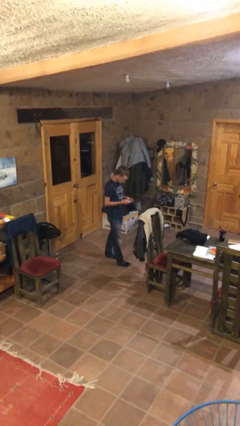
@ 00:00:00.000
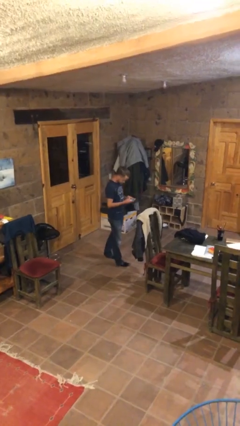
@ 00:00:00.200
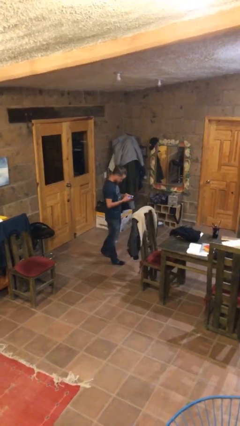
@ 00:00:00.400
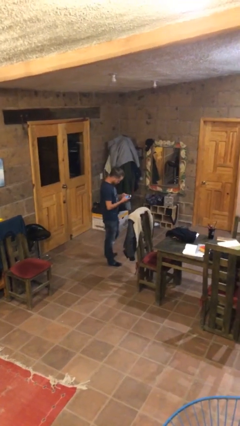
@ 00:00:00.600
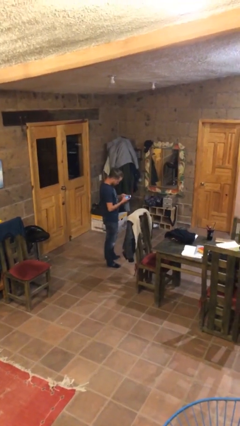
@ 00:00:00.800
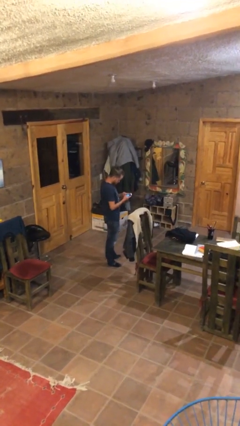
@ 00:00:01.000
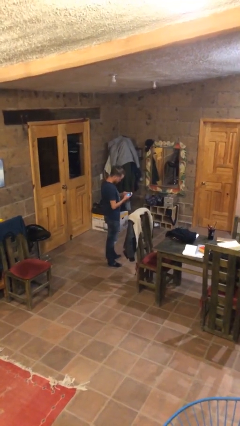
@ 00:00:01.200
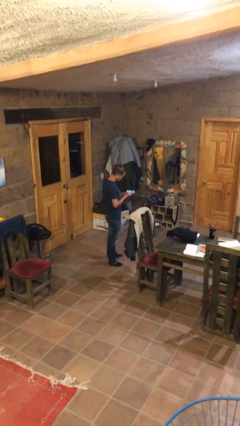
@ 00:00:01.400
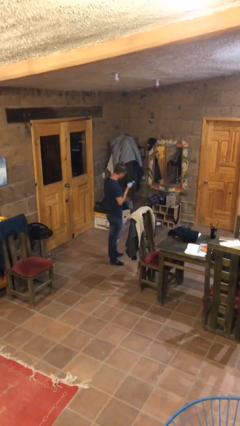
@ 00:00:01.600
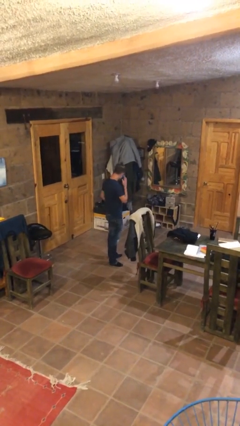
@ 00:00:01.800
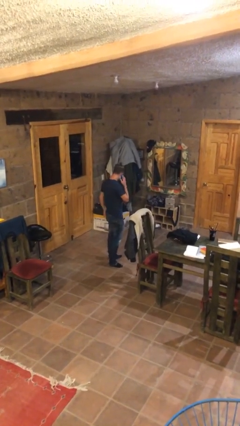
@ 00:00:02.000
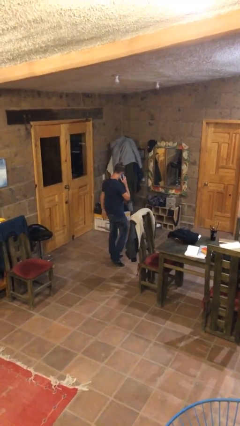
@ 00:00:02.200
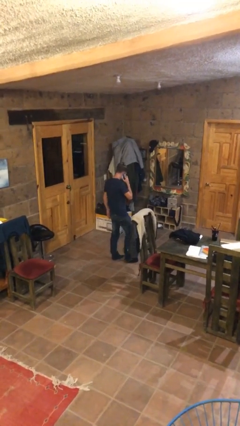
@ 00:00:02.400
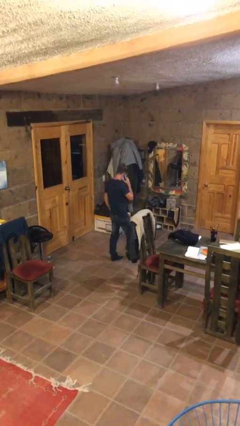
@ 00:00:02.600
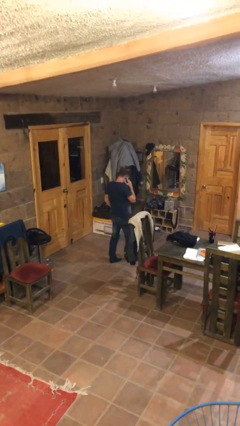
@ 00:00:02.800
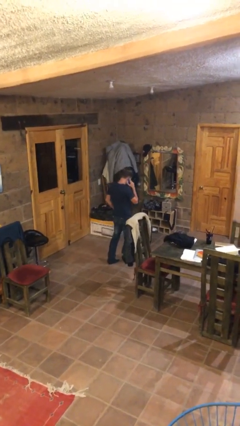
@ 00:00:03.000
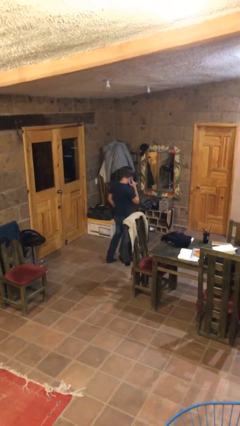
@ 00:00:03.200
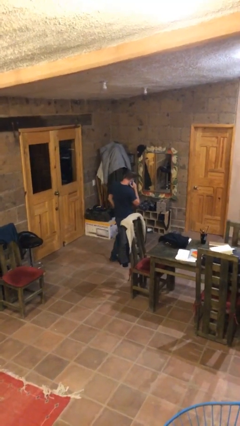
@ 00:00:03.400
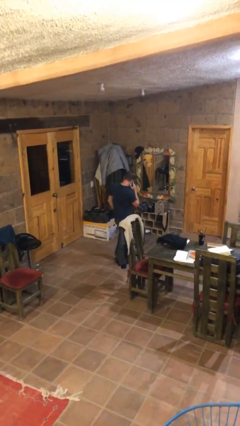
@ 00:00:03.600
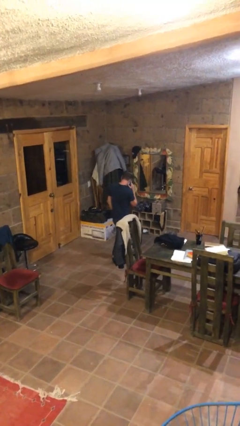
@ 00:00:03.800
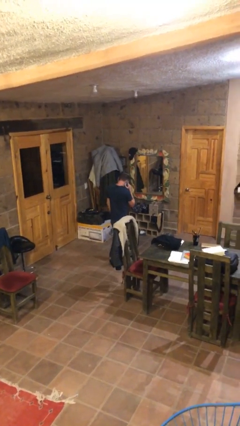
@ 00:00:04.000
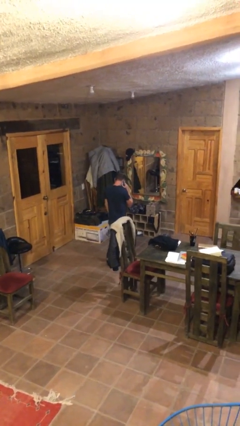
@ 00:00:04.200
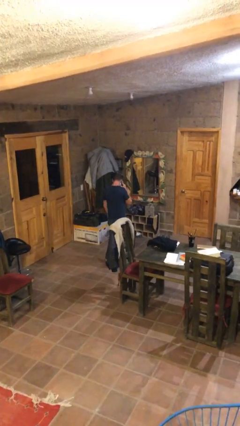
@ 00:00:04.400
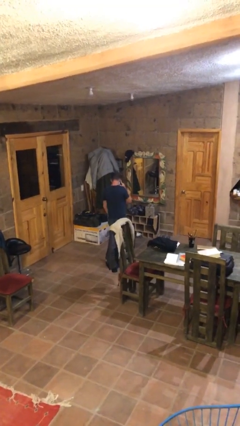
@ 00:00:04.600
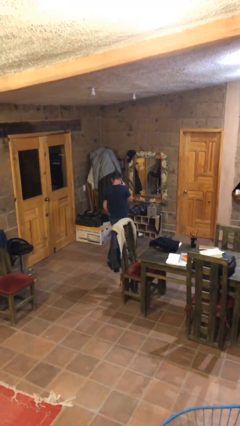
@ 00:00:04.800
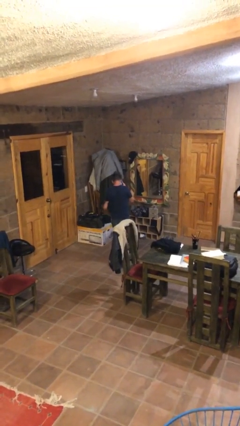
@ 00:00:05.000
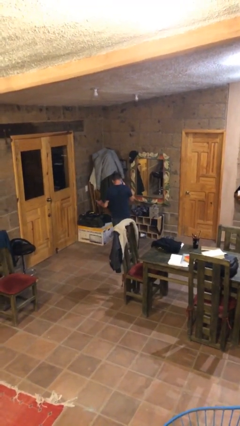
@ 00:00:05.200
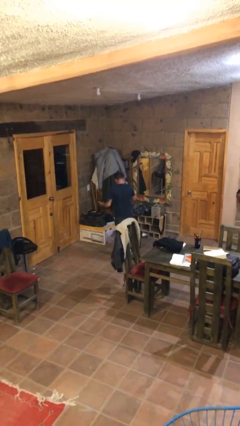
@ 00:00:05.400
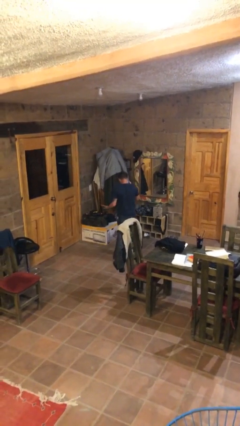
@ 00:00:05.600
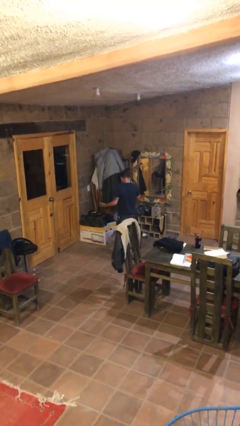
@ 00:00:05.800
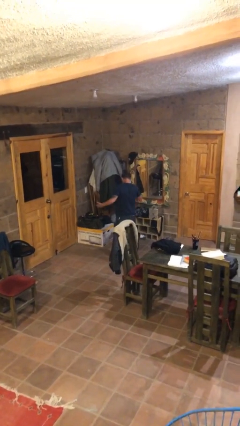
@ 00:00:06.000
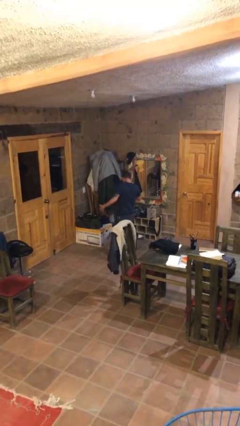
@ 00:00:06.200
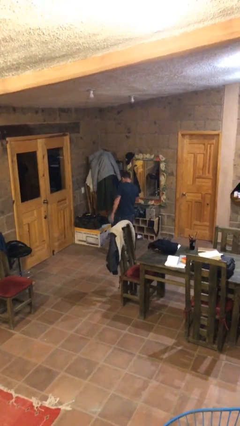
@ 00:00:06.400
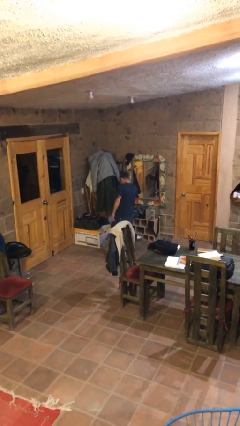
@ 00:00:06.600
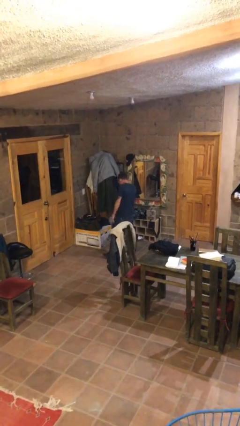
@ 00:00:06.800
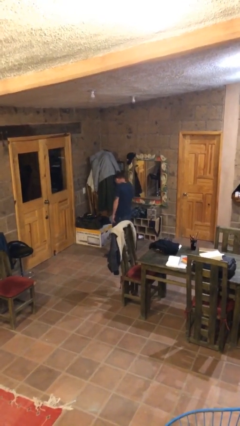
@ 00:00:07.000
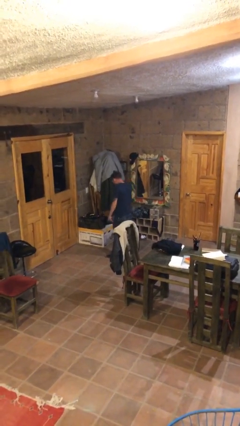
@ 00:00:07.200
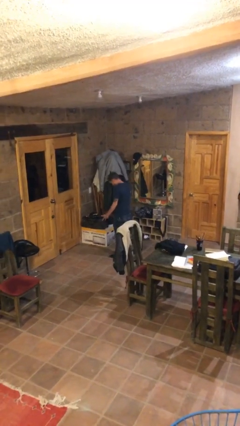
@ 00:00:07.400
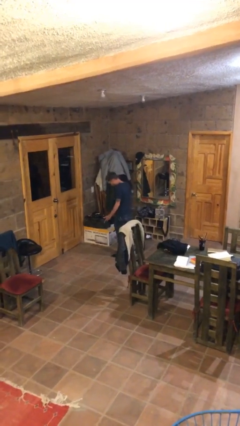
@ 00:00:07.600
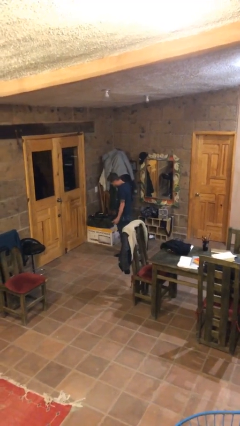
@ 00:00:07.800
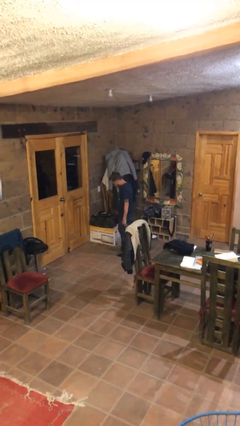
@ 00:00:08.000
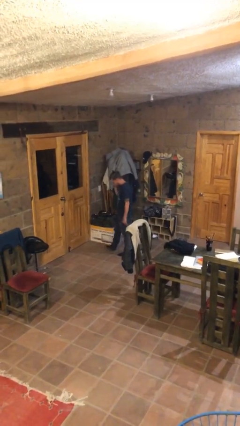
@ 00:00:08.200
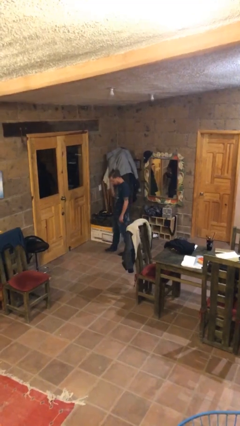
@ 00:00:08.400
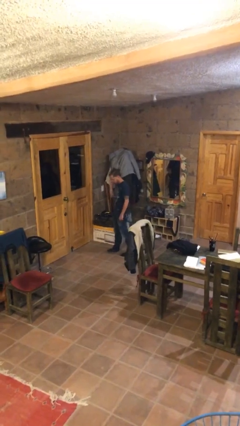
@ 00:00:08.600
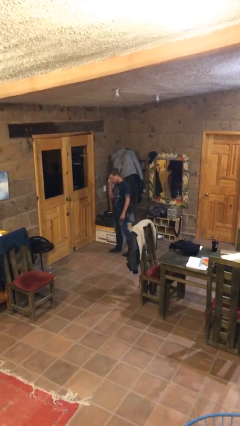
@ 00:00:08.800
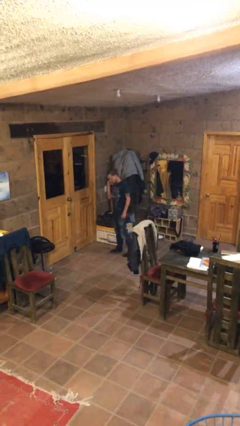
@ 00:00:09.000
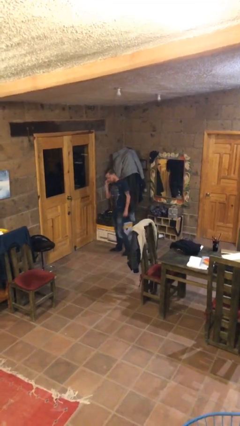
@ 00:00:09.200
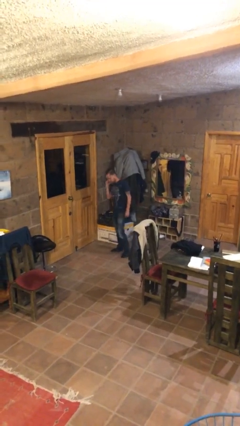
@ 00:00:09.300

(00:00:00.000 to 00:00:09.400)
person talks on phone

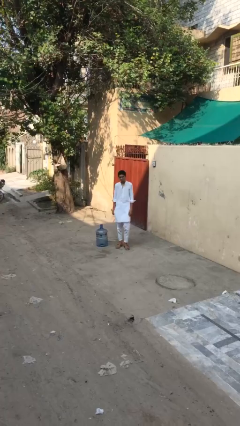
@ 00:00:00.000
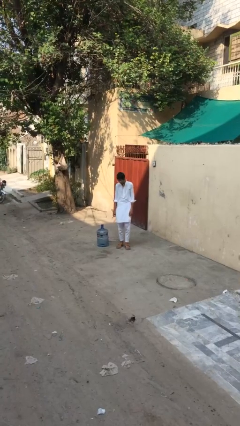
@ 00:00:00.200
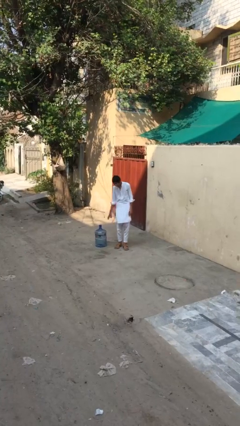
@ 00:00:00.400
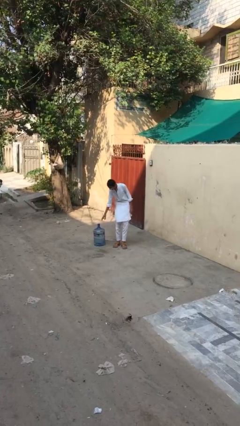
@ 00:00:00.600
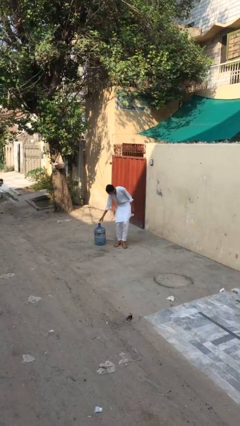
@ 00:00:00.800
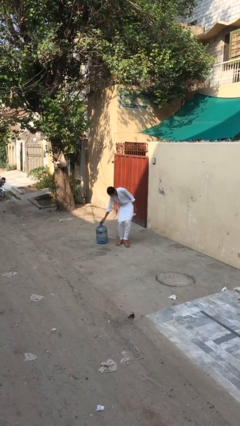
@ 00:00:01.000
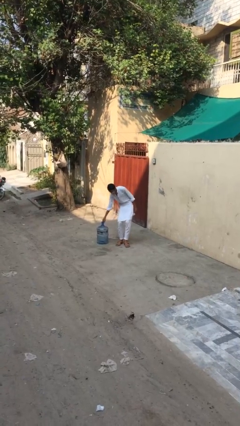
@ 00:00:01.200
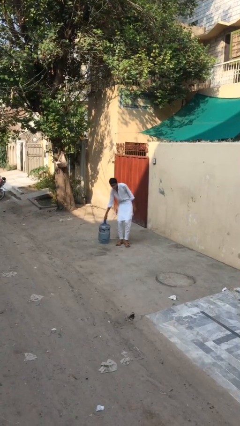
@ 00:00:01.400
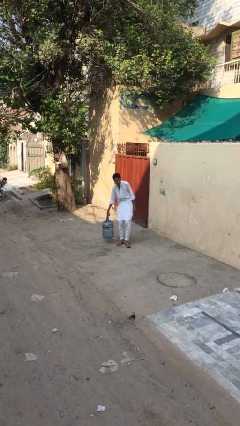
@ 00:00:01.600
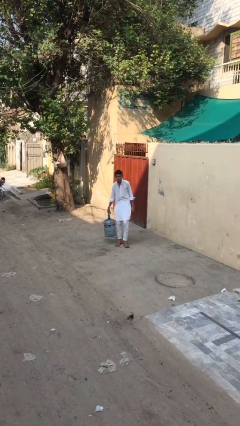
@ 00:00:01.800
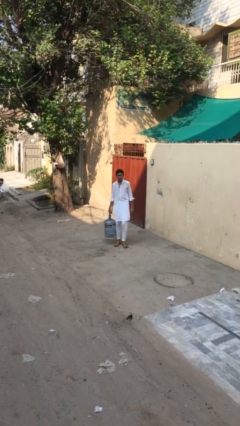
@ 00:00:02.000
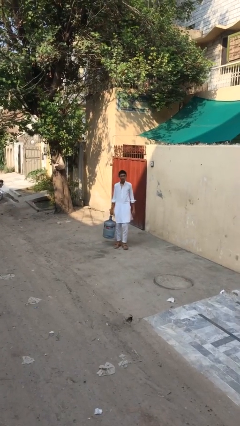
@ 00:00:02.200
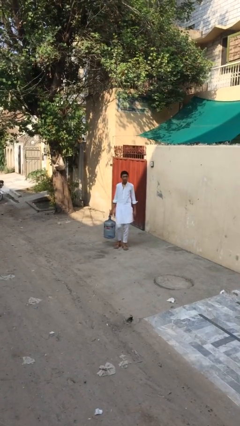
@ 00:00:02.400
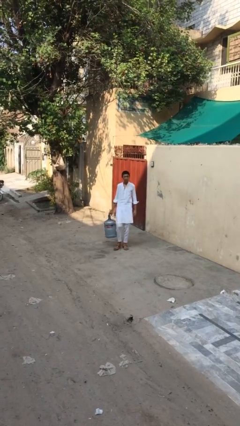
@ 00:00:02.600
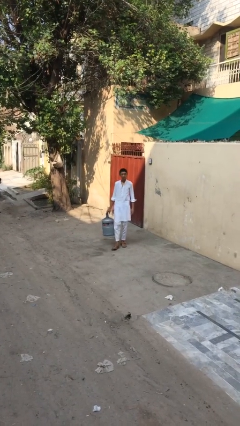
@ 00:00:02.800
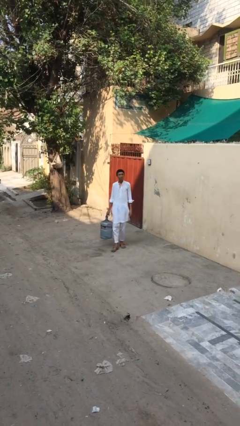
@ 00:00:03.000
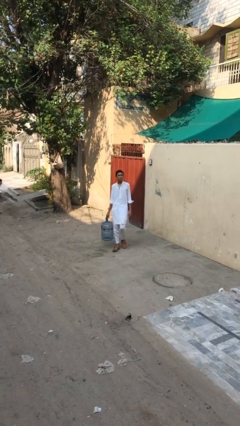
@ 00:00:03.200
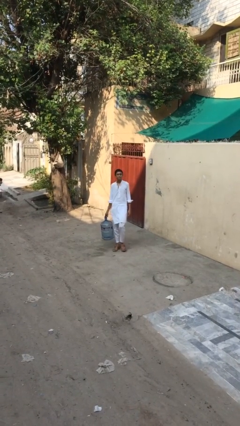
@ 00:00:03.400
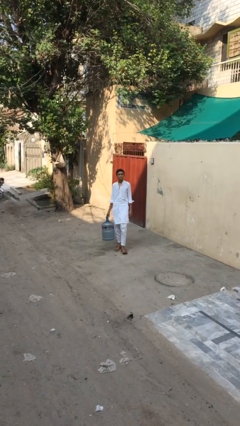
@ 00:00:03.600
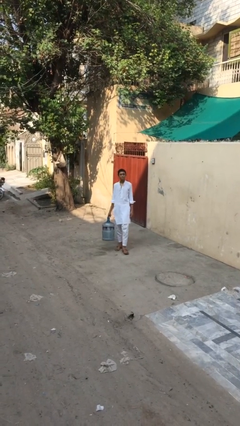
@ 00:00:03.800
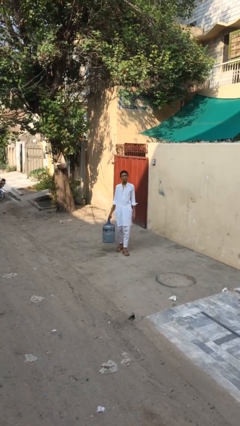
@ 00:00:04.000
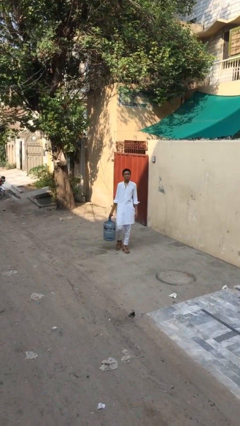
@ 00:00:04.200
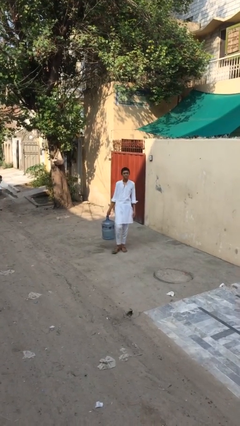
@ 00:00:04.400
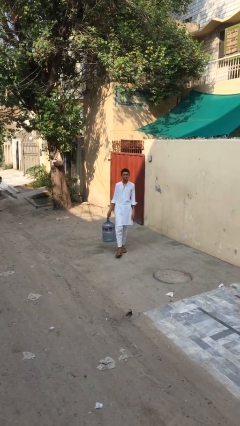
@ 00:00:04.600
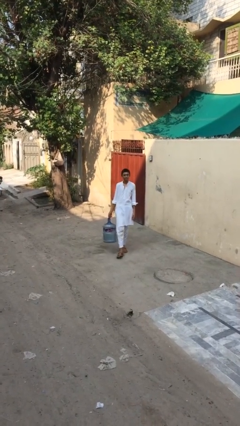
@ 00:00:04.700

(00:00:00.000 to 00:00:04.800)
person carries heavy object

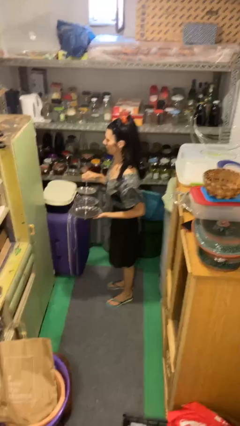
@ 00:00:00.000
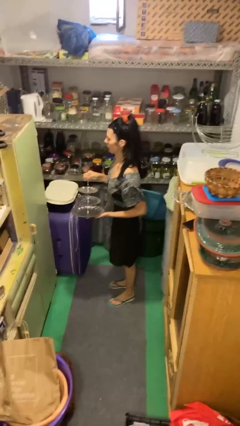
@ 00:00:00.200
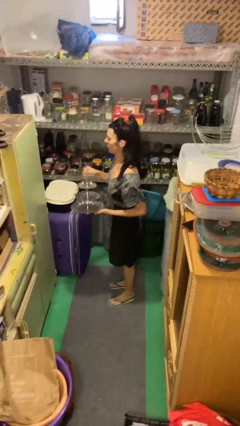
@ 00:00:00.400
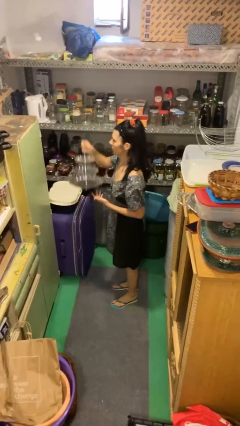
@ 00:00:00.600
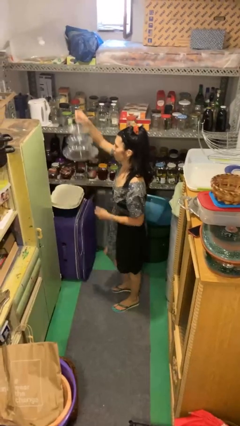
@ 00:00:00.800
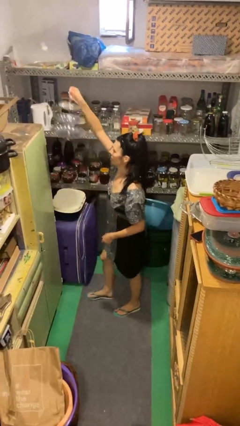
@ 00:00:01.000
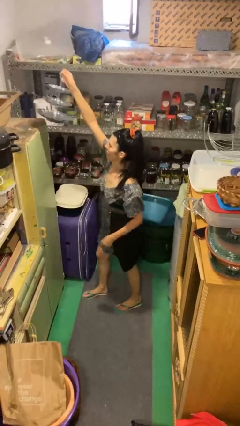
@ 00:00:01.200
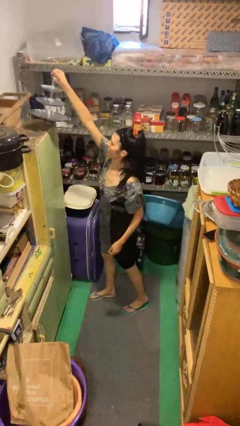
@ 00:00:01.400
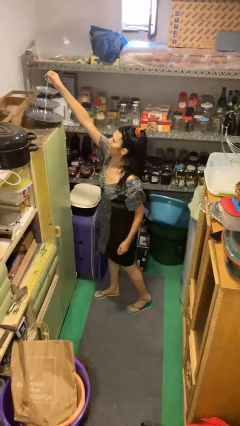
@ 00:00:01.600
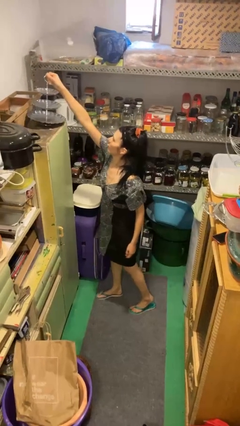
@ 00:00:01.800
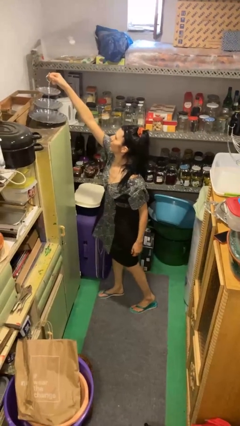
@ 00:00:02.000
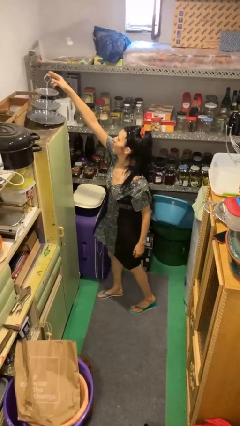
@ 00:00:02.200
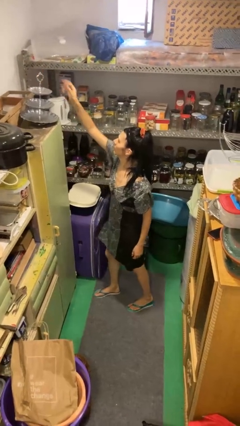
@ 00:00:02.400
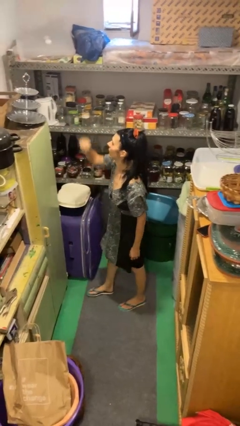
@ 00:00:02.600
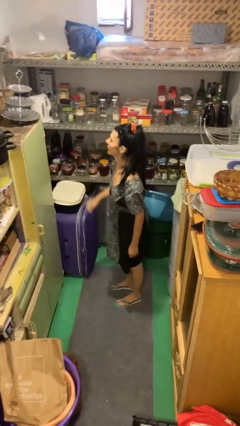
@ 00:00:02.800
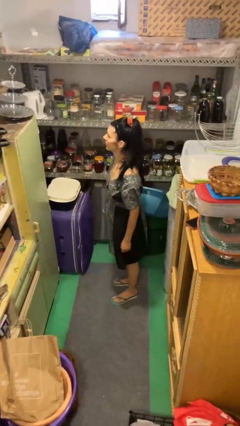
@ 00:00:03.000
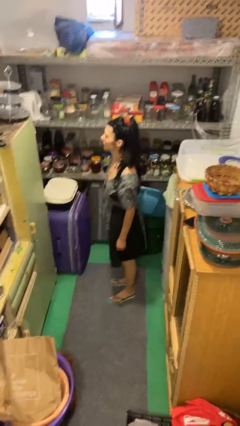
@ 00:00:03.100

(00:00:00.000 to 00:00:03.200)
person puts down object on countertop
